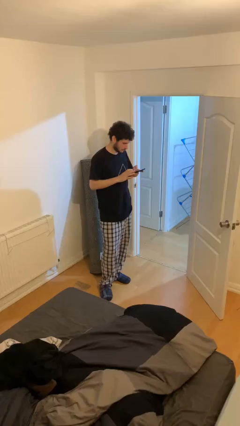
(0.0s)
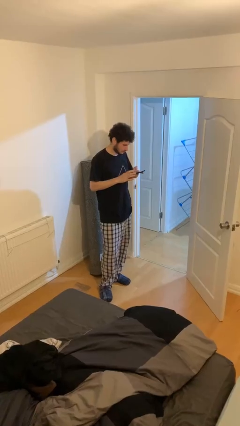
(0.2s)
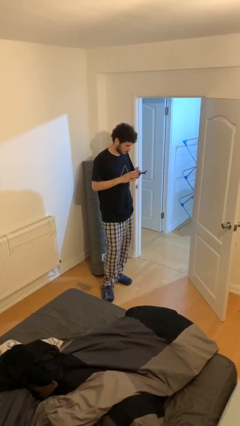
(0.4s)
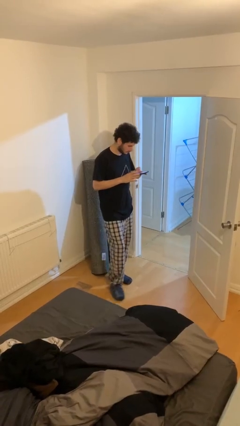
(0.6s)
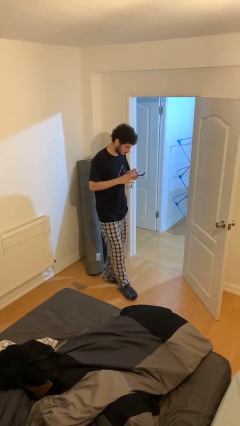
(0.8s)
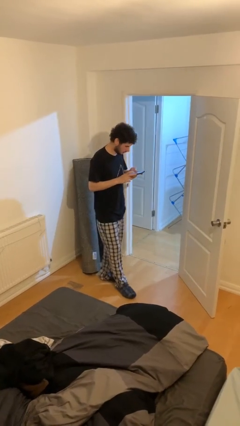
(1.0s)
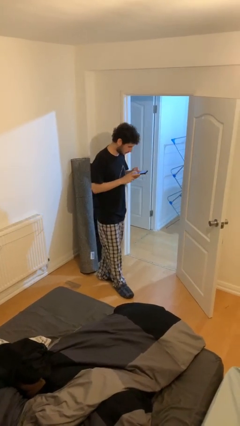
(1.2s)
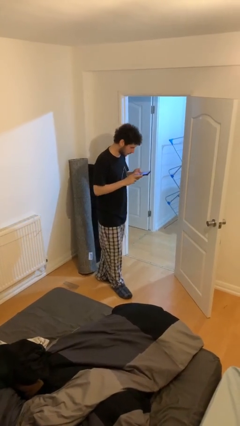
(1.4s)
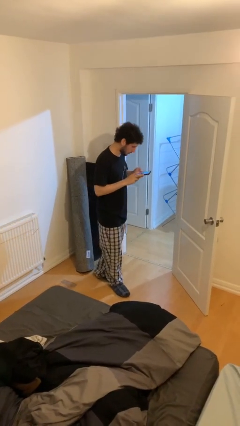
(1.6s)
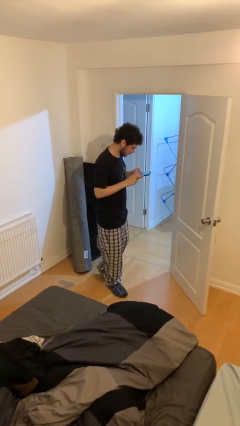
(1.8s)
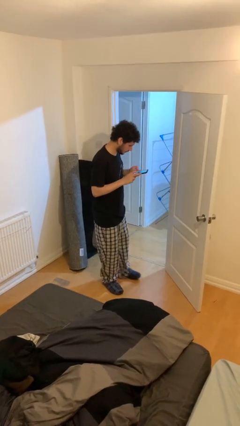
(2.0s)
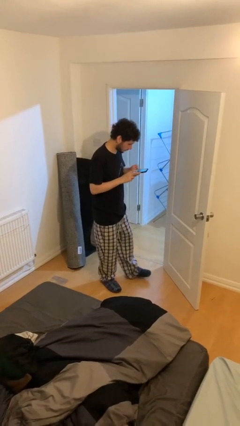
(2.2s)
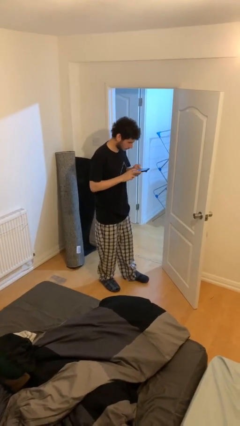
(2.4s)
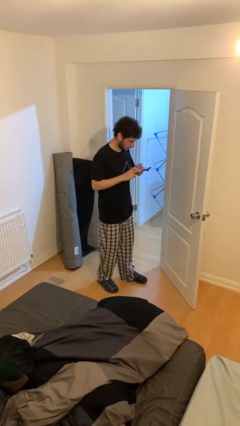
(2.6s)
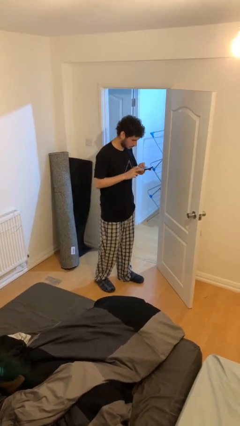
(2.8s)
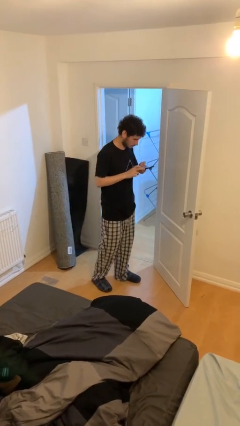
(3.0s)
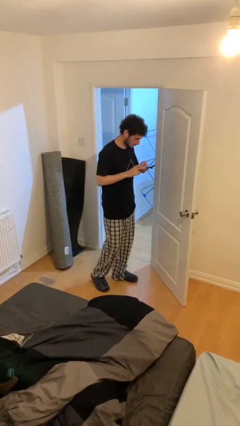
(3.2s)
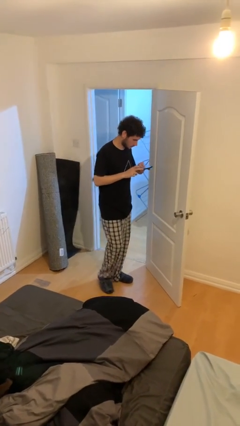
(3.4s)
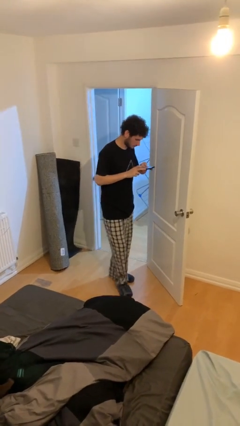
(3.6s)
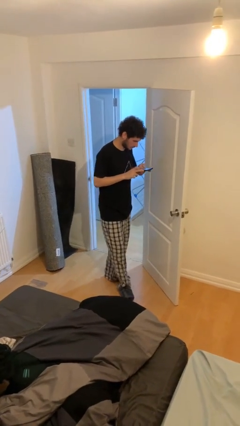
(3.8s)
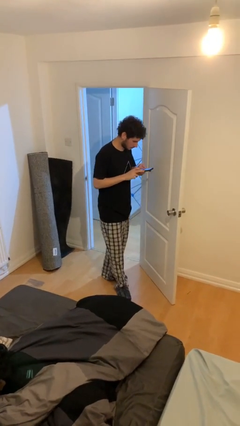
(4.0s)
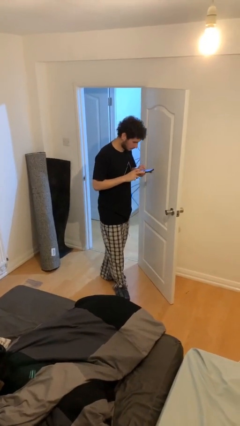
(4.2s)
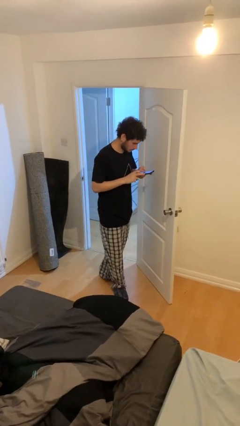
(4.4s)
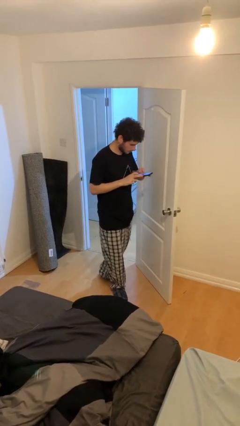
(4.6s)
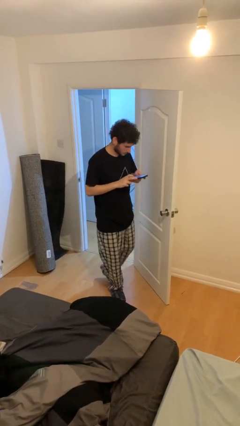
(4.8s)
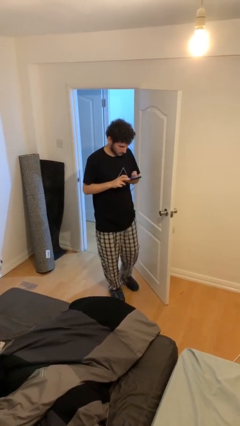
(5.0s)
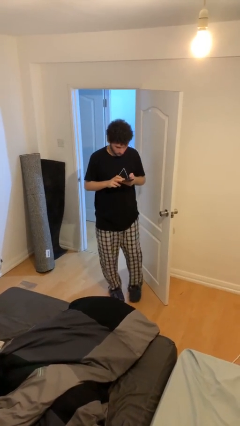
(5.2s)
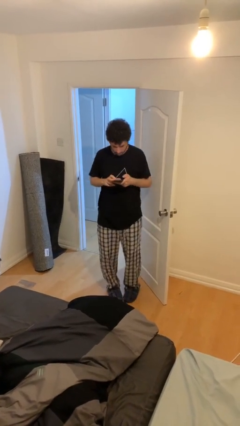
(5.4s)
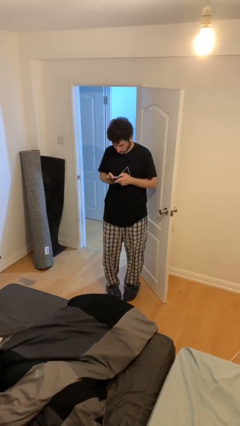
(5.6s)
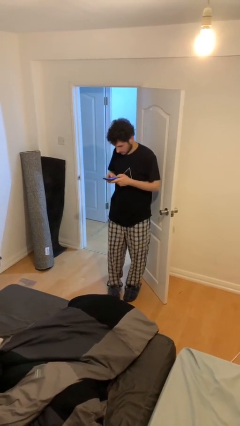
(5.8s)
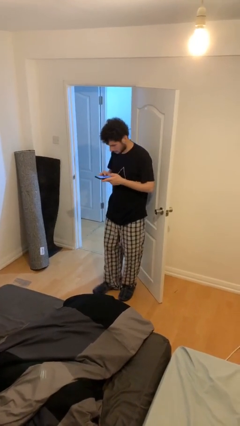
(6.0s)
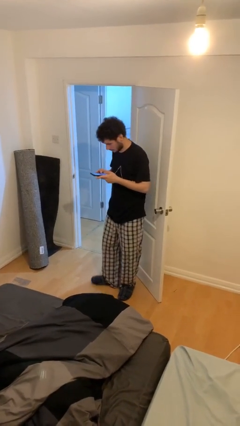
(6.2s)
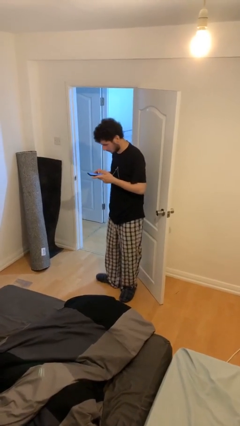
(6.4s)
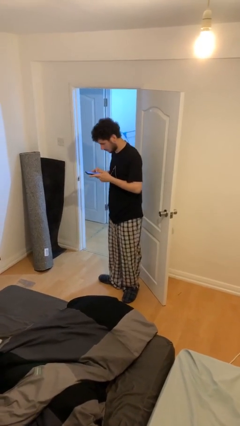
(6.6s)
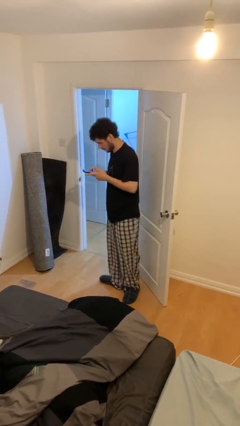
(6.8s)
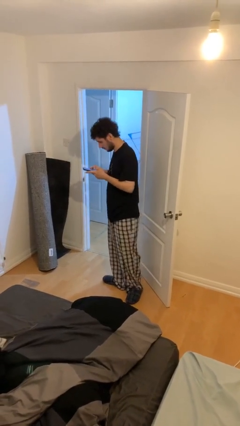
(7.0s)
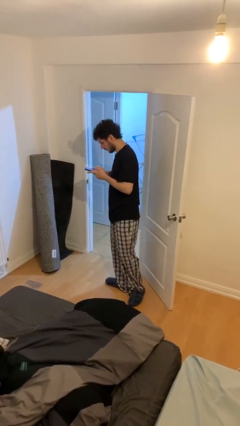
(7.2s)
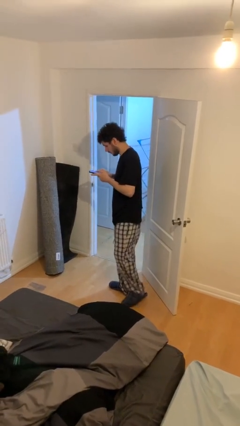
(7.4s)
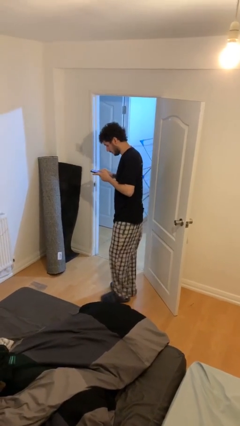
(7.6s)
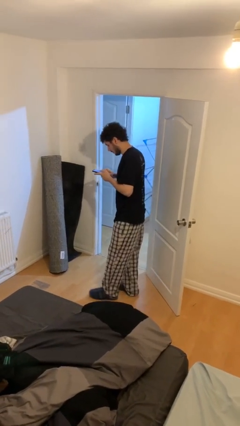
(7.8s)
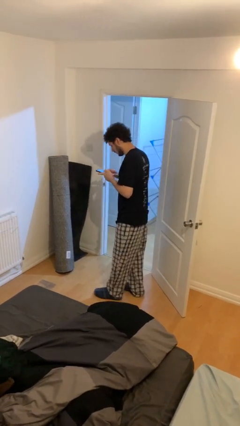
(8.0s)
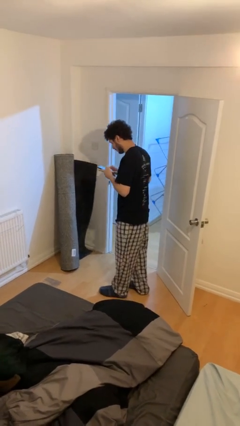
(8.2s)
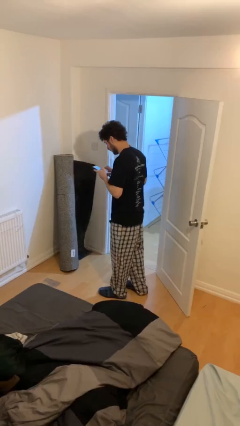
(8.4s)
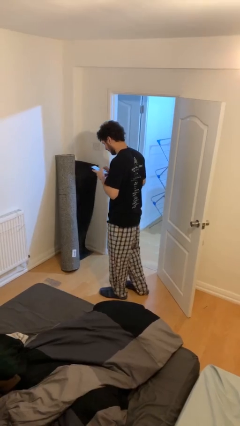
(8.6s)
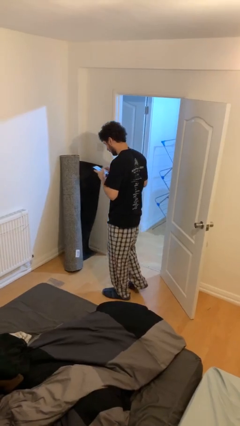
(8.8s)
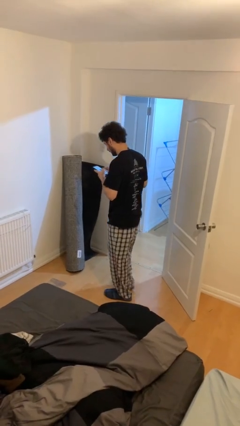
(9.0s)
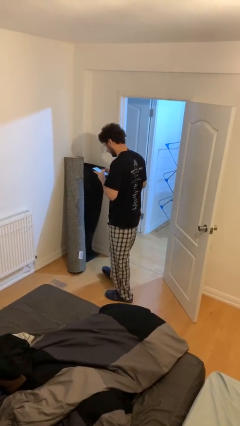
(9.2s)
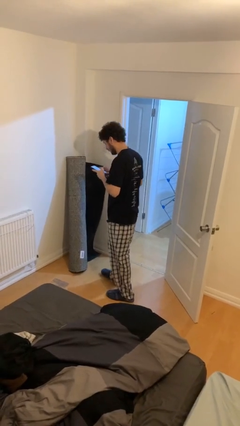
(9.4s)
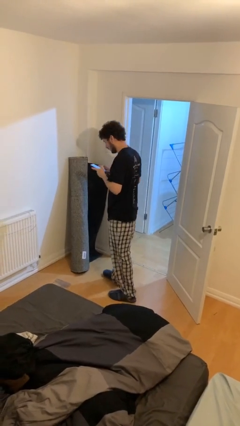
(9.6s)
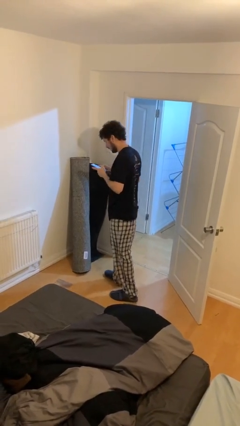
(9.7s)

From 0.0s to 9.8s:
person texts on phone

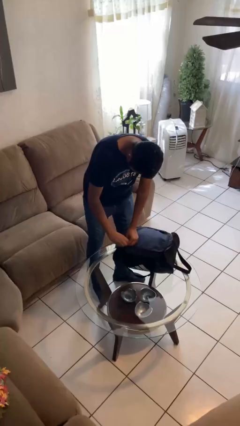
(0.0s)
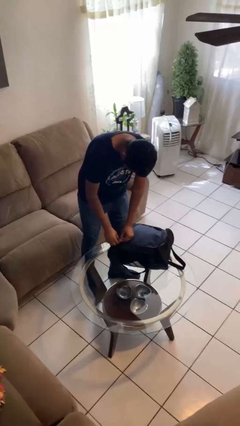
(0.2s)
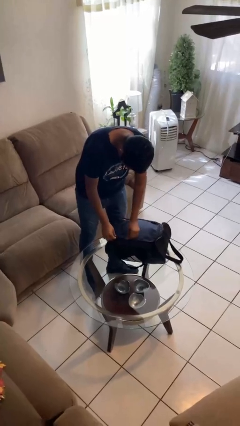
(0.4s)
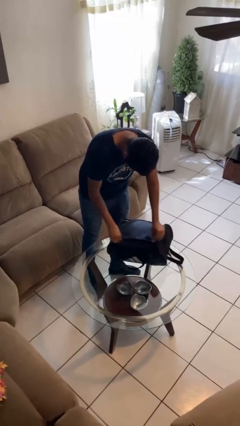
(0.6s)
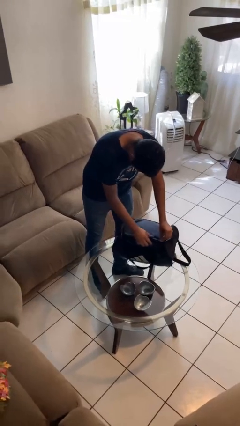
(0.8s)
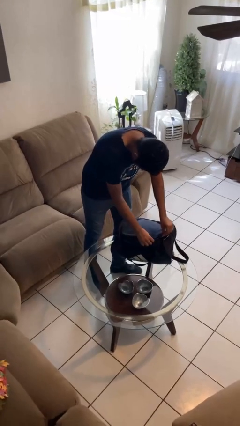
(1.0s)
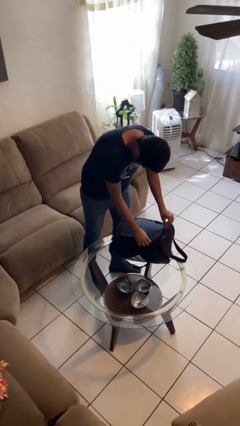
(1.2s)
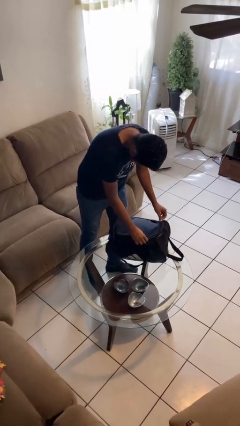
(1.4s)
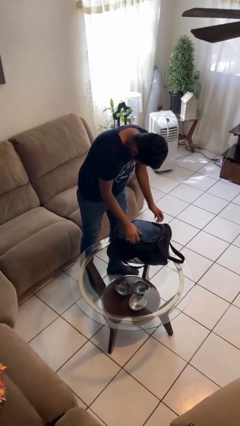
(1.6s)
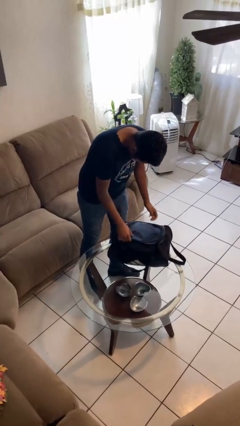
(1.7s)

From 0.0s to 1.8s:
person opens suitcase

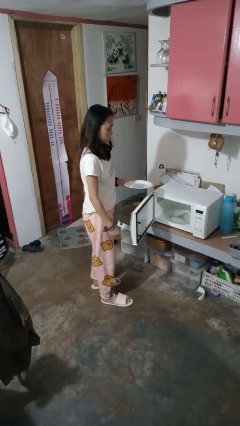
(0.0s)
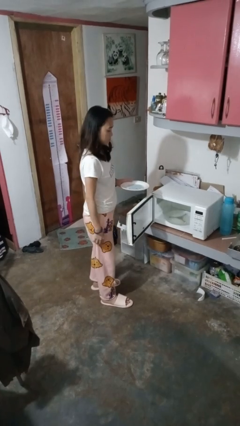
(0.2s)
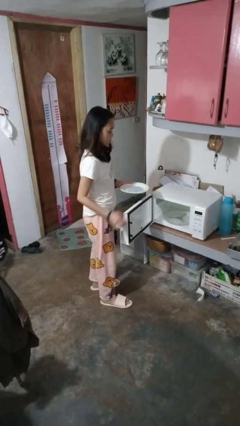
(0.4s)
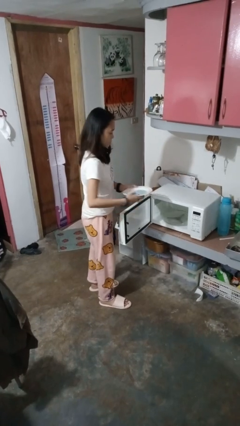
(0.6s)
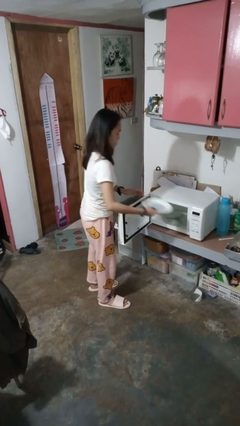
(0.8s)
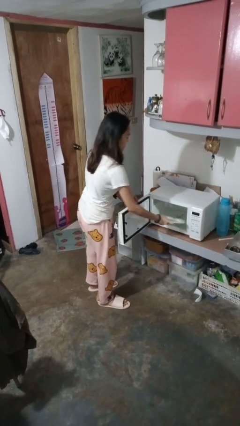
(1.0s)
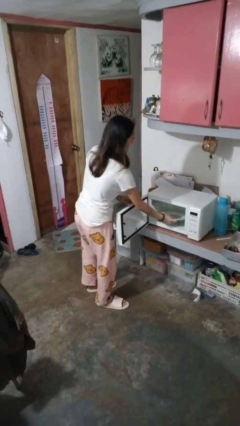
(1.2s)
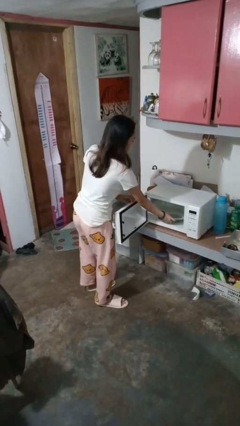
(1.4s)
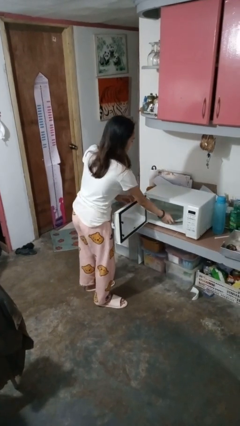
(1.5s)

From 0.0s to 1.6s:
person puts object into microwave

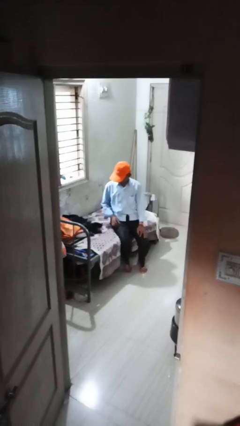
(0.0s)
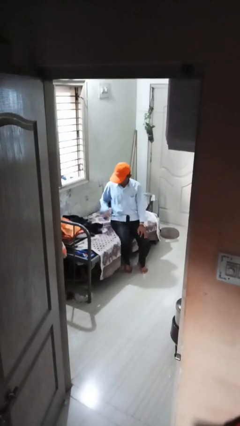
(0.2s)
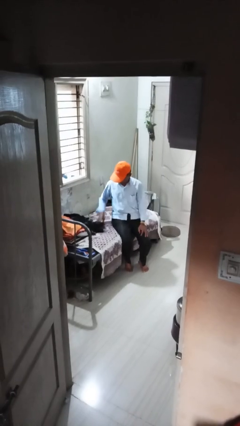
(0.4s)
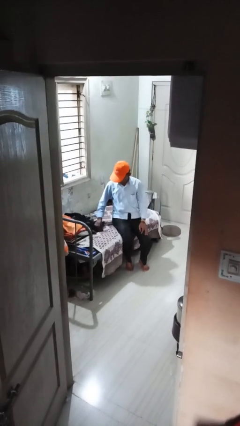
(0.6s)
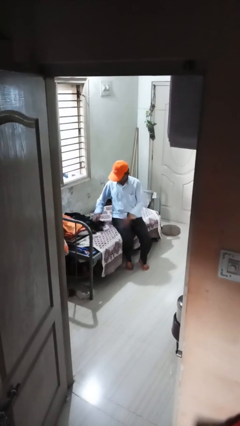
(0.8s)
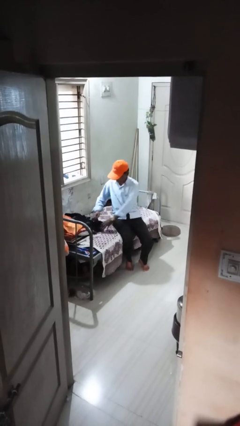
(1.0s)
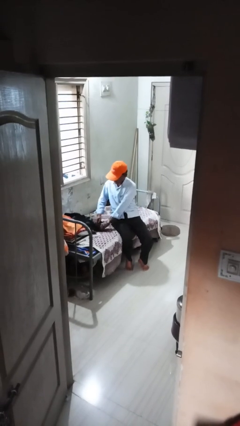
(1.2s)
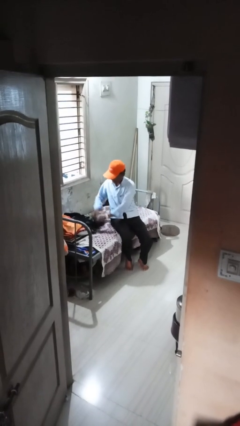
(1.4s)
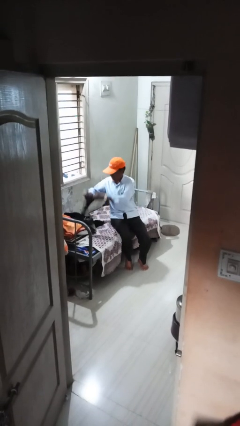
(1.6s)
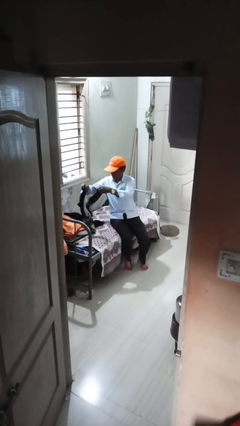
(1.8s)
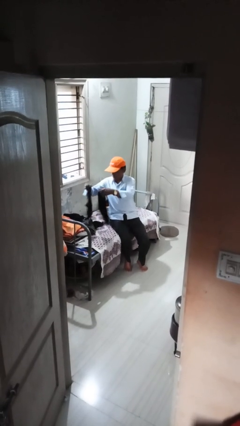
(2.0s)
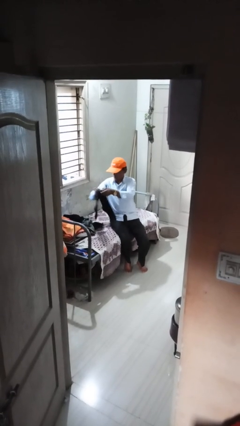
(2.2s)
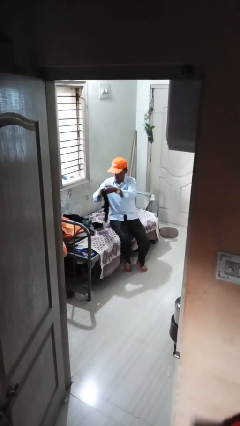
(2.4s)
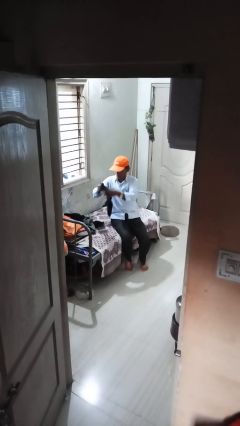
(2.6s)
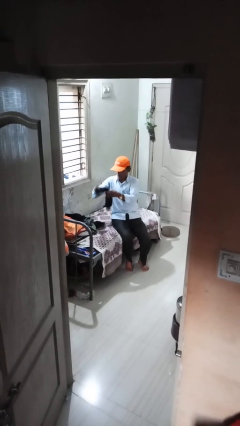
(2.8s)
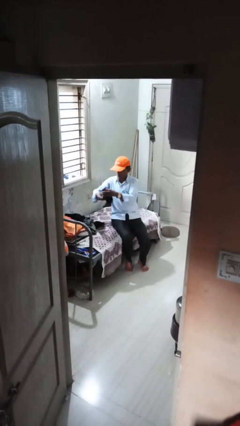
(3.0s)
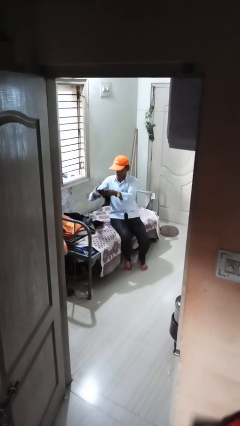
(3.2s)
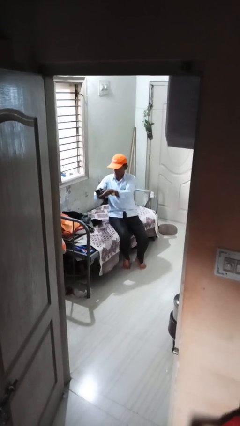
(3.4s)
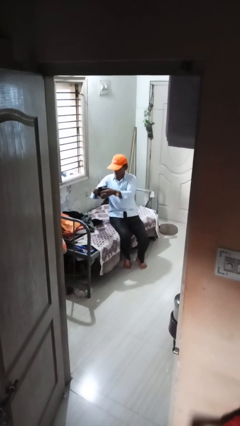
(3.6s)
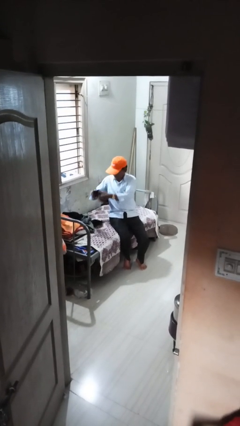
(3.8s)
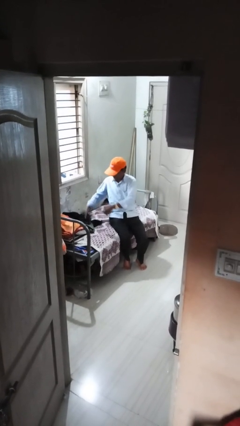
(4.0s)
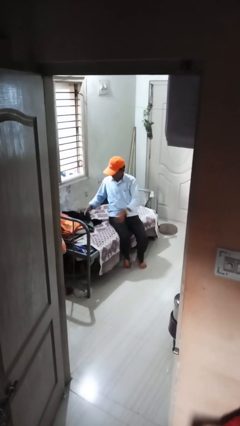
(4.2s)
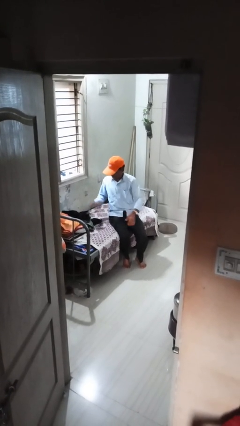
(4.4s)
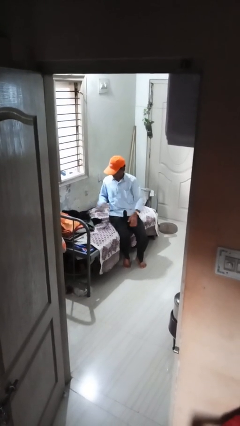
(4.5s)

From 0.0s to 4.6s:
person folds socks
